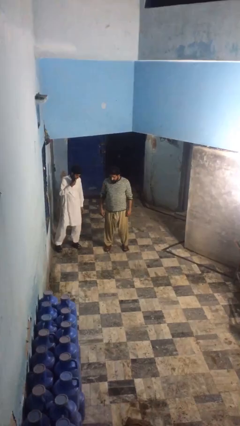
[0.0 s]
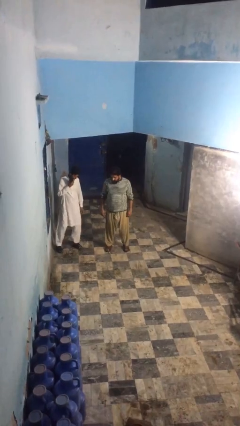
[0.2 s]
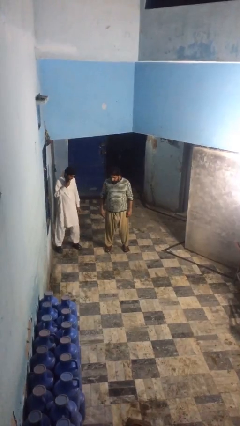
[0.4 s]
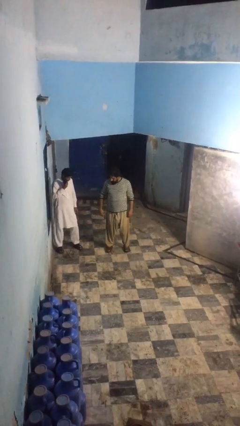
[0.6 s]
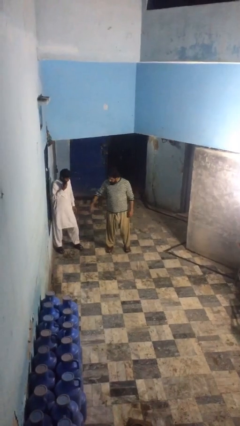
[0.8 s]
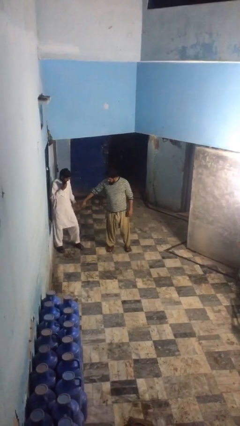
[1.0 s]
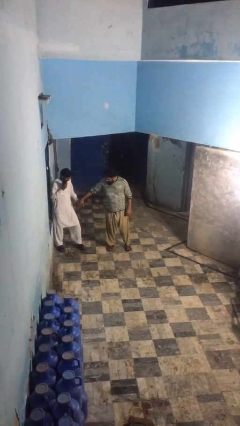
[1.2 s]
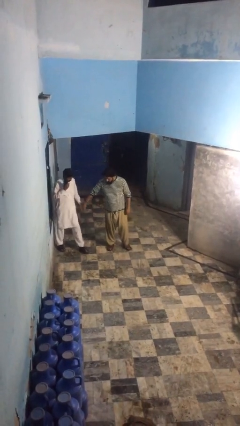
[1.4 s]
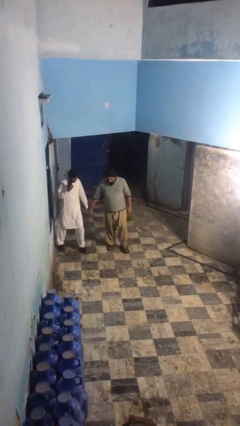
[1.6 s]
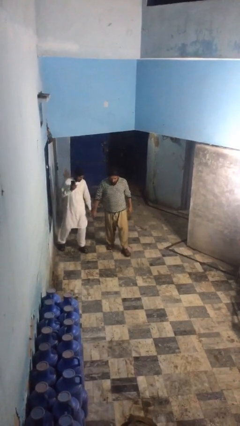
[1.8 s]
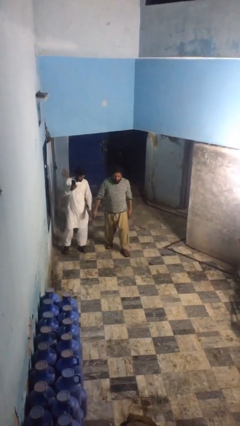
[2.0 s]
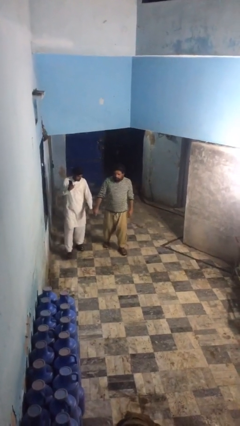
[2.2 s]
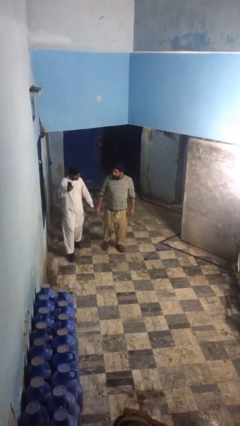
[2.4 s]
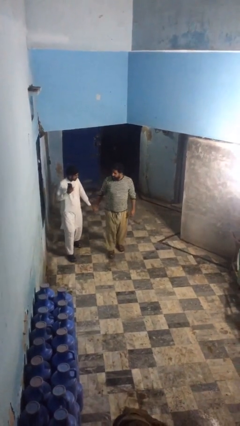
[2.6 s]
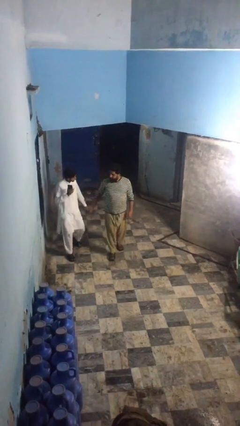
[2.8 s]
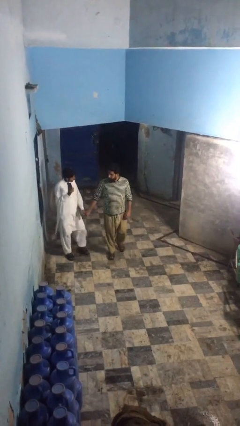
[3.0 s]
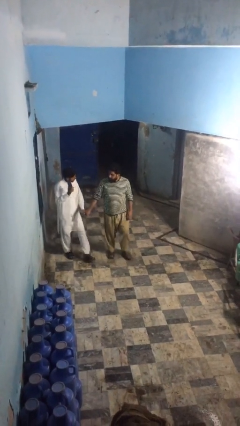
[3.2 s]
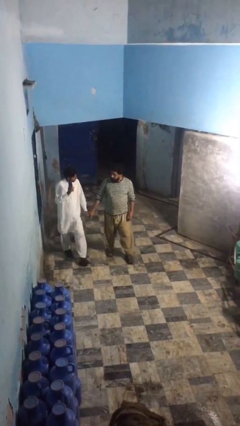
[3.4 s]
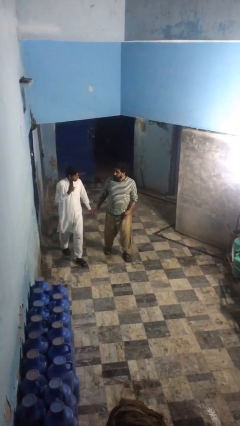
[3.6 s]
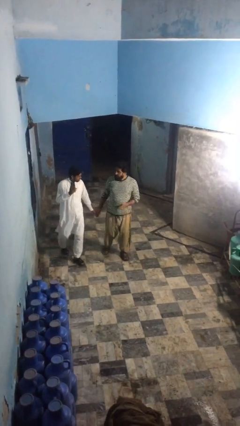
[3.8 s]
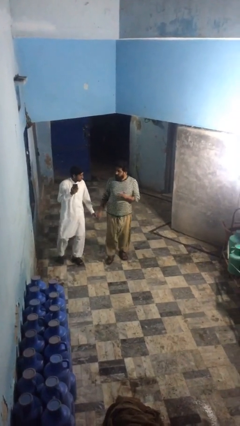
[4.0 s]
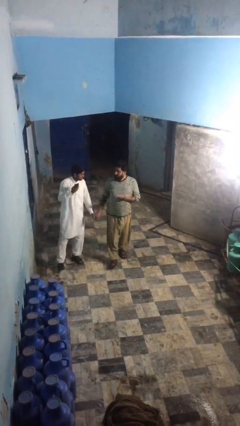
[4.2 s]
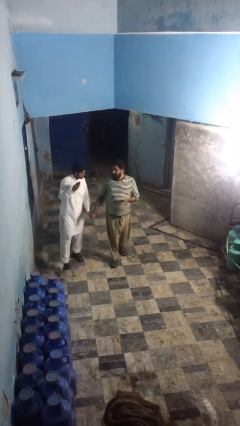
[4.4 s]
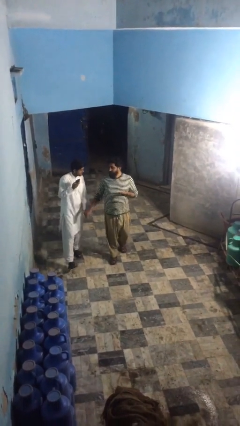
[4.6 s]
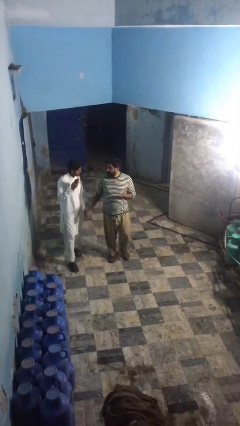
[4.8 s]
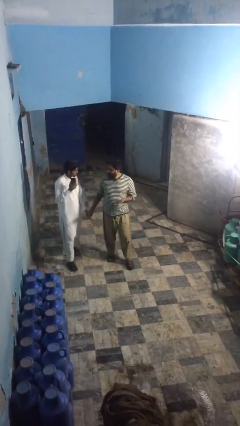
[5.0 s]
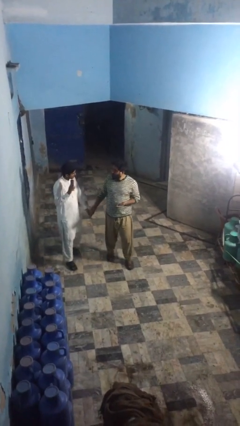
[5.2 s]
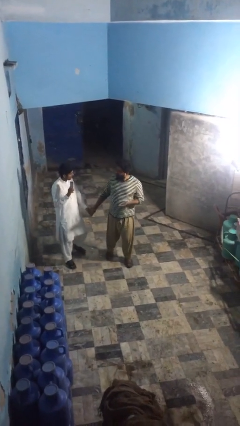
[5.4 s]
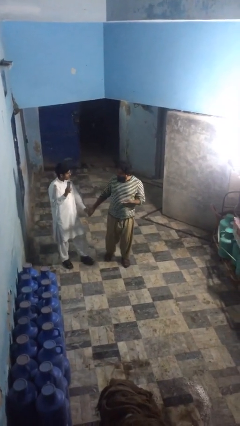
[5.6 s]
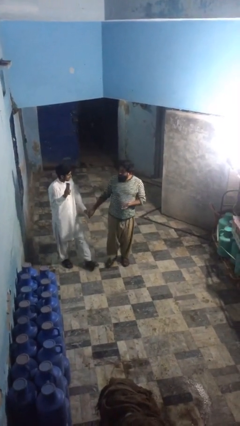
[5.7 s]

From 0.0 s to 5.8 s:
person holds hand

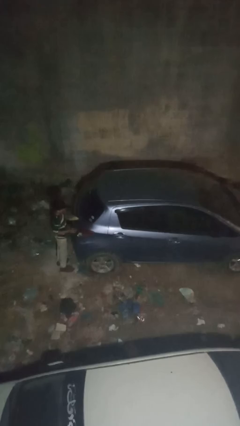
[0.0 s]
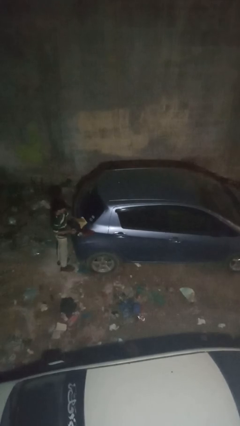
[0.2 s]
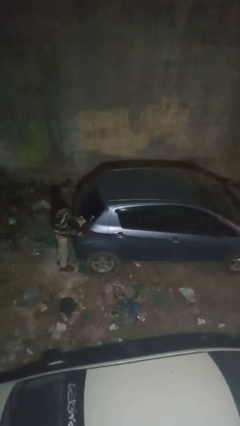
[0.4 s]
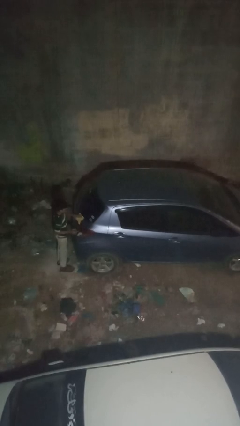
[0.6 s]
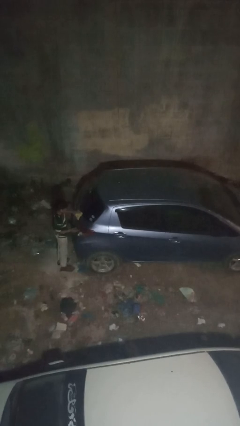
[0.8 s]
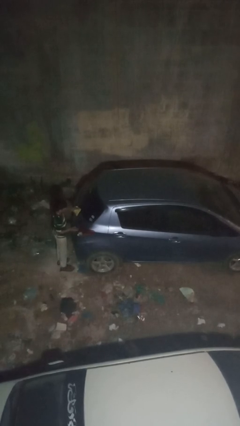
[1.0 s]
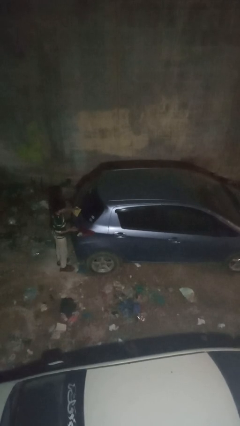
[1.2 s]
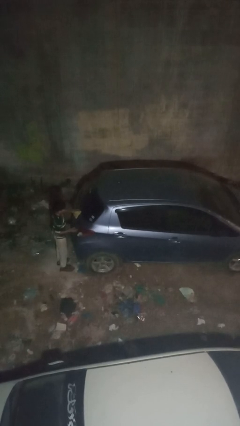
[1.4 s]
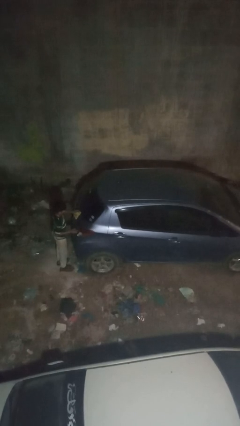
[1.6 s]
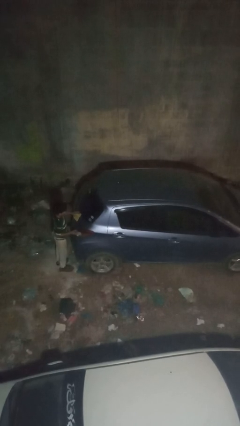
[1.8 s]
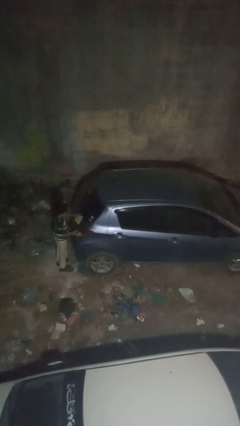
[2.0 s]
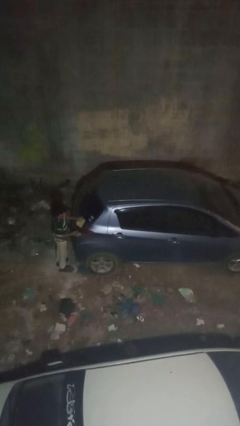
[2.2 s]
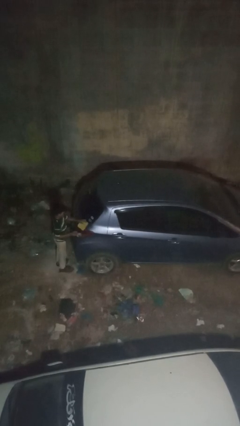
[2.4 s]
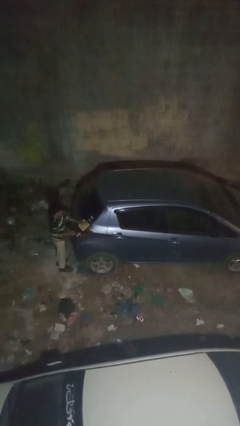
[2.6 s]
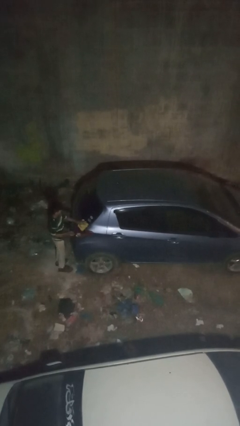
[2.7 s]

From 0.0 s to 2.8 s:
person polishes car with rag

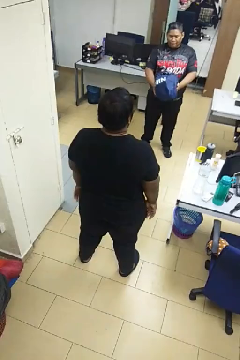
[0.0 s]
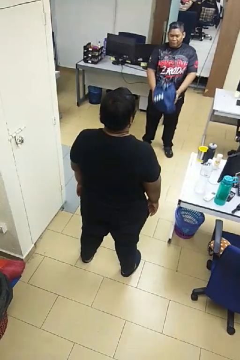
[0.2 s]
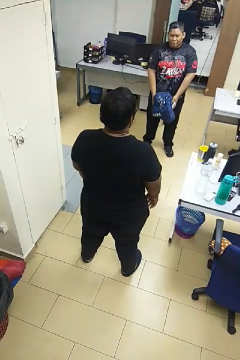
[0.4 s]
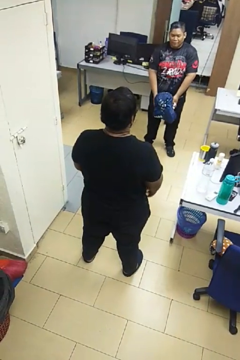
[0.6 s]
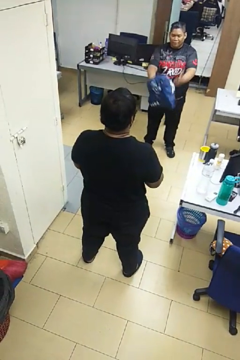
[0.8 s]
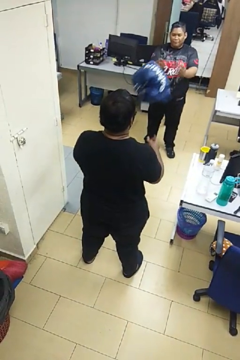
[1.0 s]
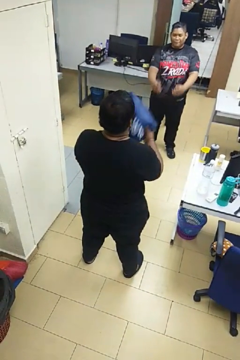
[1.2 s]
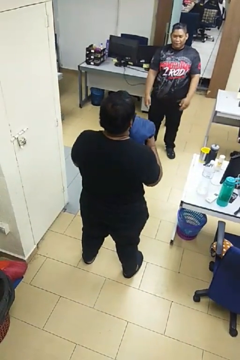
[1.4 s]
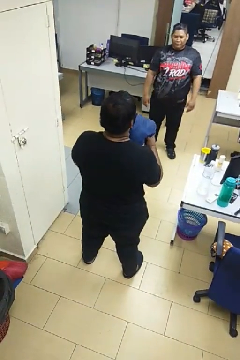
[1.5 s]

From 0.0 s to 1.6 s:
person catches object from person

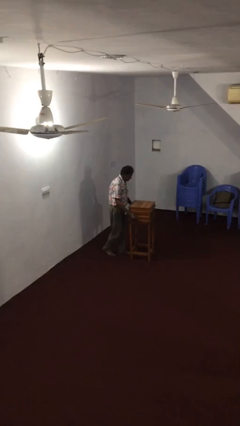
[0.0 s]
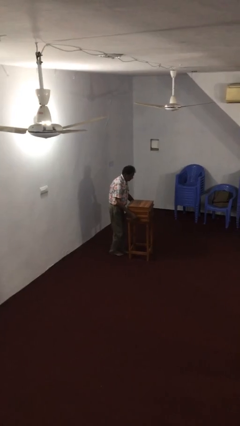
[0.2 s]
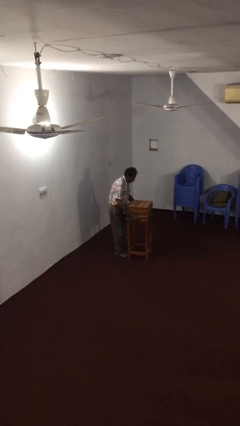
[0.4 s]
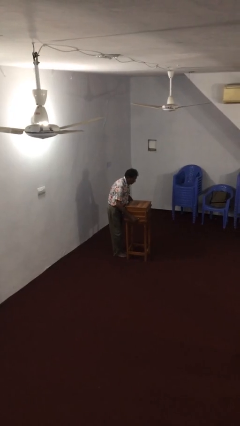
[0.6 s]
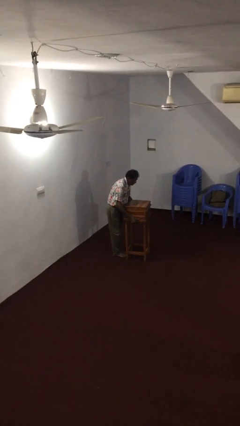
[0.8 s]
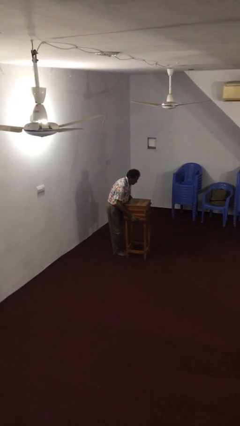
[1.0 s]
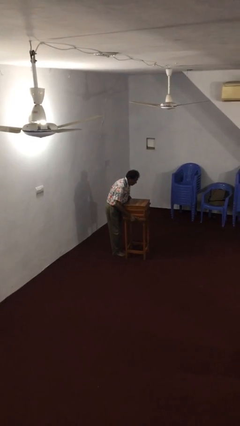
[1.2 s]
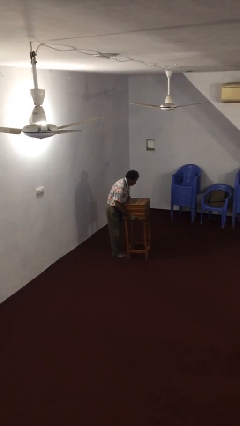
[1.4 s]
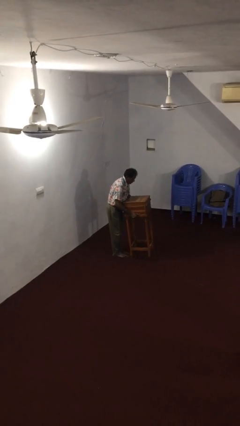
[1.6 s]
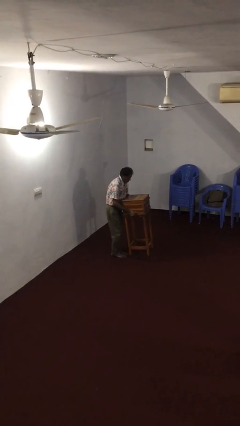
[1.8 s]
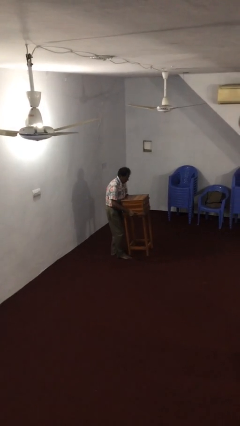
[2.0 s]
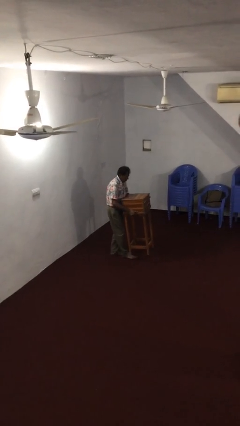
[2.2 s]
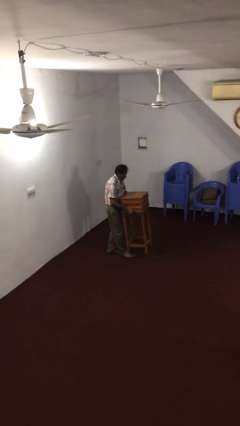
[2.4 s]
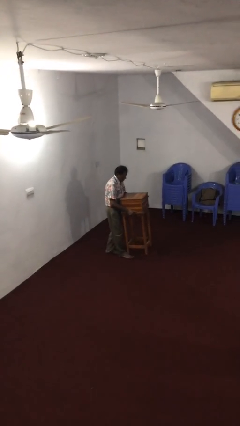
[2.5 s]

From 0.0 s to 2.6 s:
person picks up object from floor

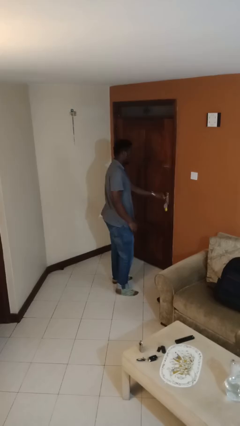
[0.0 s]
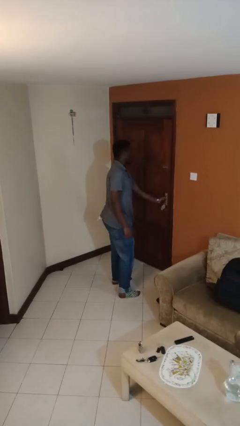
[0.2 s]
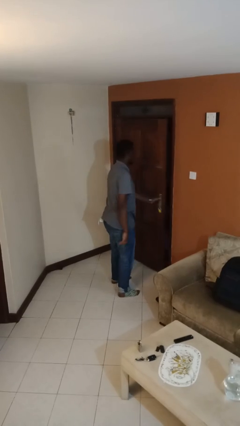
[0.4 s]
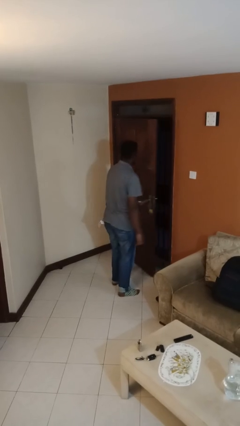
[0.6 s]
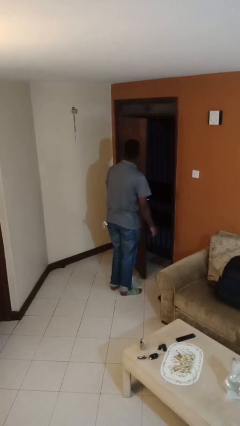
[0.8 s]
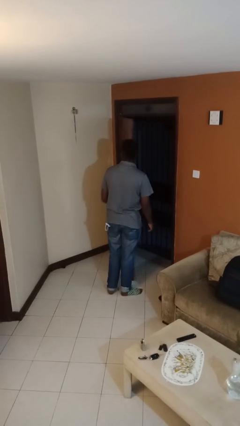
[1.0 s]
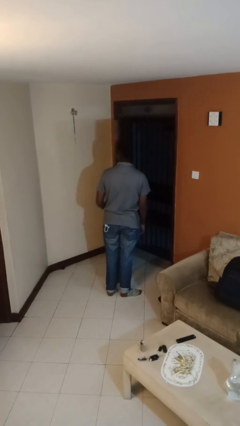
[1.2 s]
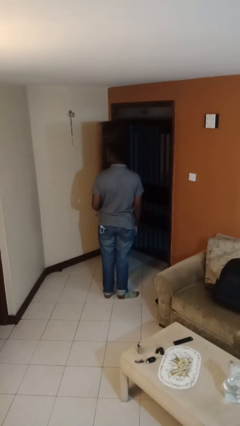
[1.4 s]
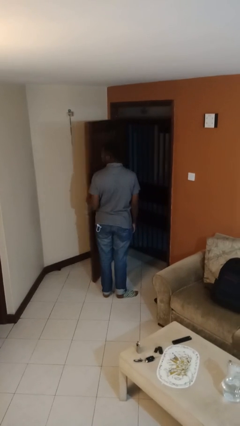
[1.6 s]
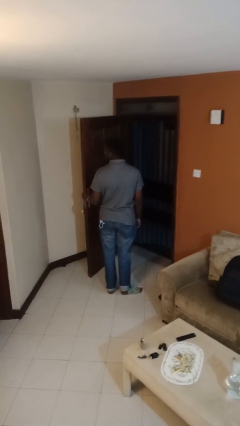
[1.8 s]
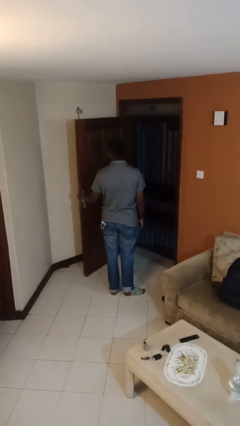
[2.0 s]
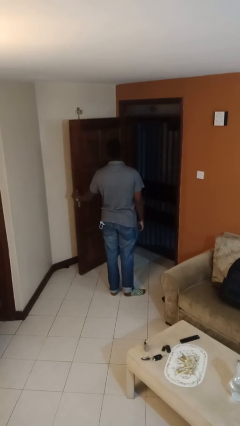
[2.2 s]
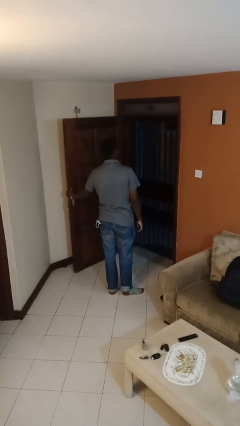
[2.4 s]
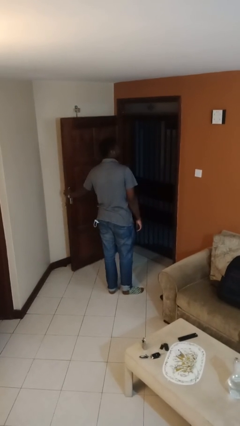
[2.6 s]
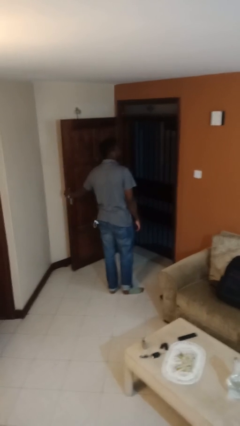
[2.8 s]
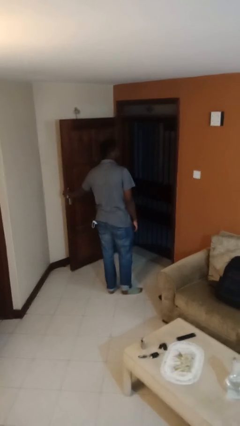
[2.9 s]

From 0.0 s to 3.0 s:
person opens facility door

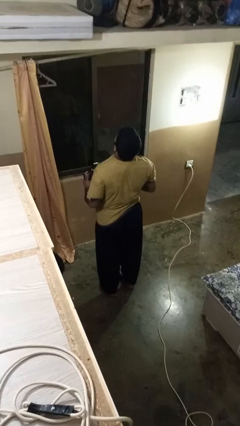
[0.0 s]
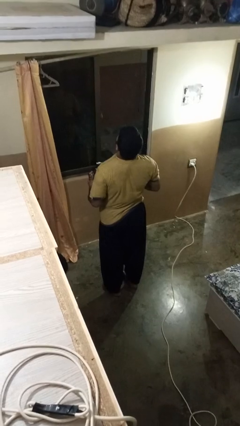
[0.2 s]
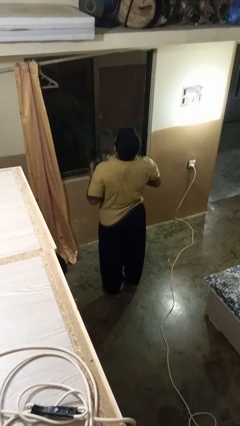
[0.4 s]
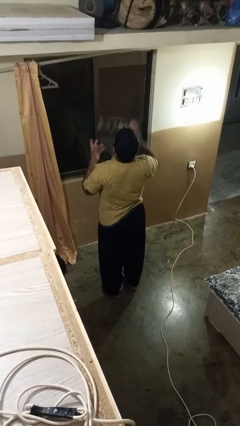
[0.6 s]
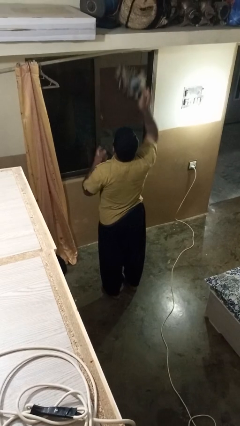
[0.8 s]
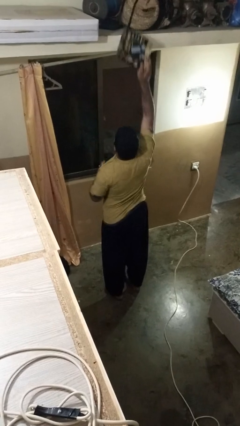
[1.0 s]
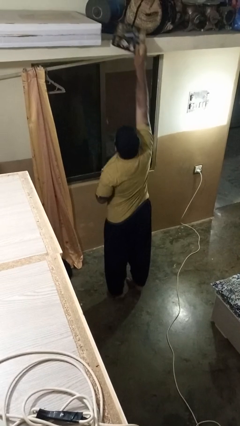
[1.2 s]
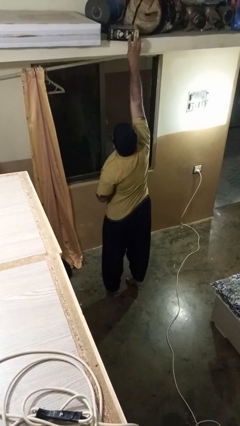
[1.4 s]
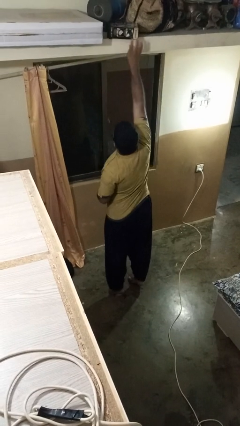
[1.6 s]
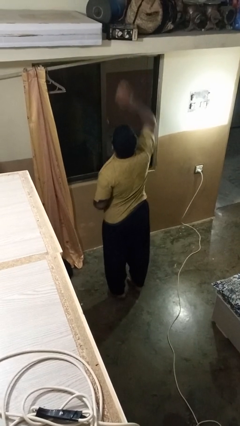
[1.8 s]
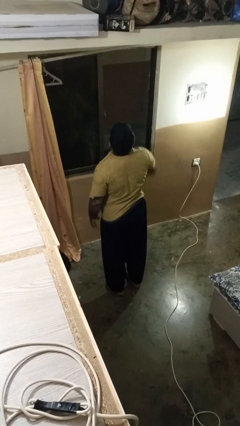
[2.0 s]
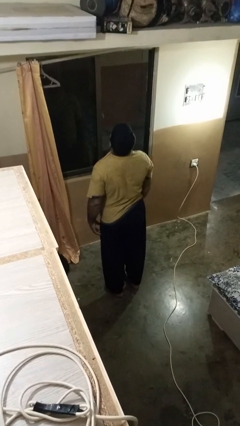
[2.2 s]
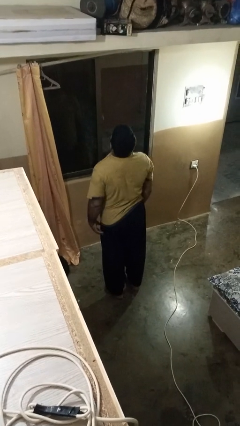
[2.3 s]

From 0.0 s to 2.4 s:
person puts down object on shelf
